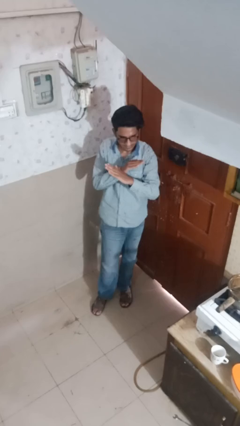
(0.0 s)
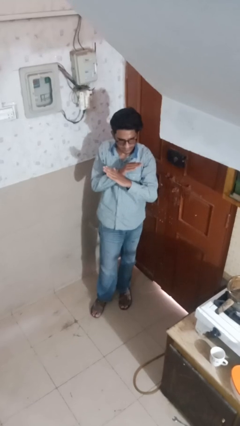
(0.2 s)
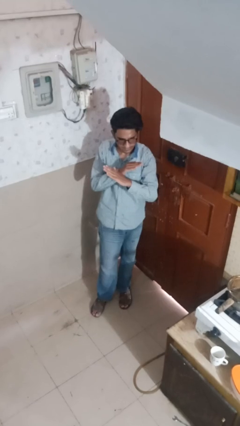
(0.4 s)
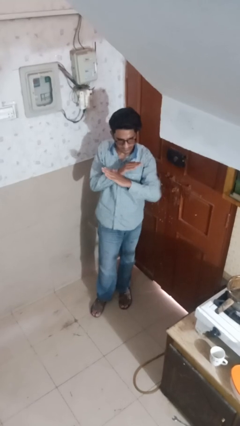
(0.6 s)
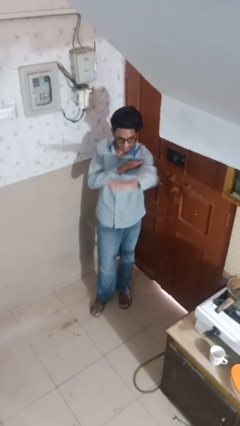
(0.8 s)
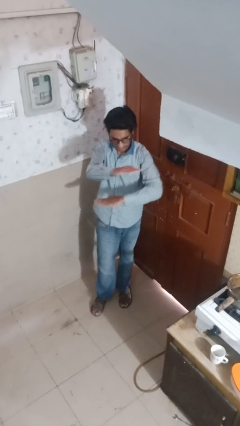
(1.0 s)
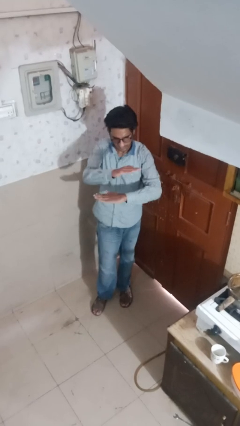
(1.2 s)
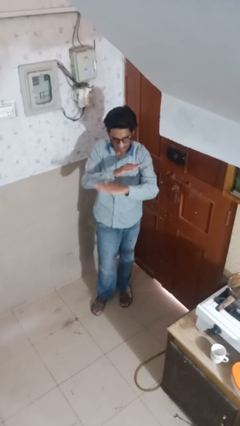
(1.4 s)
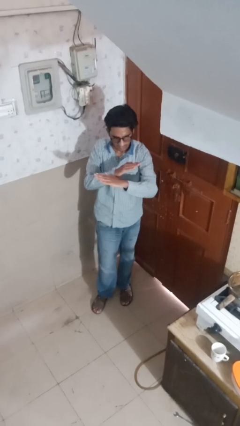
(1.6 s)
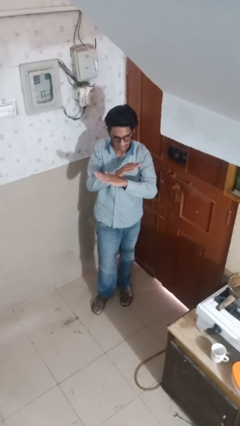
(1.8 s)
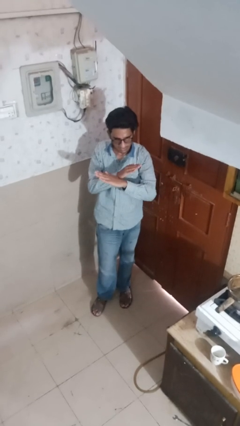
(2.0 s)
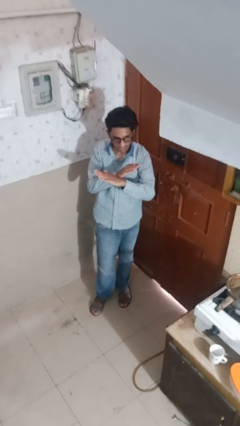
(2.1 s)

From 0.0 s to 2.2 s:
person karate chop

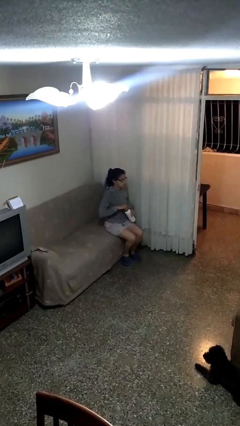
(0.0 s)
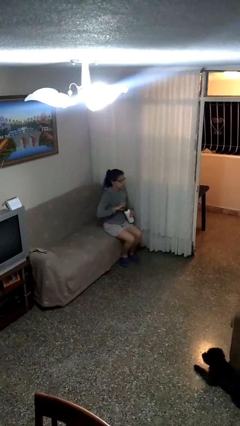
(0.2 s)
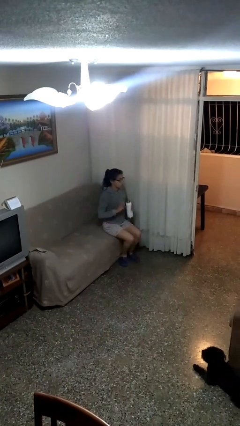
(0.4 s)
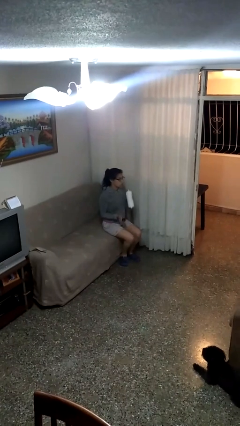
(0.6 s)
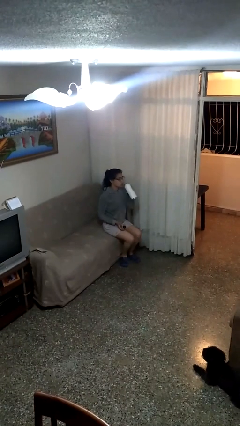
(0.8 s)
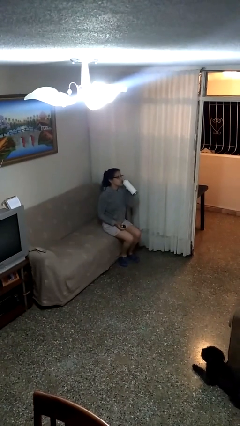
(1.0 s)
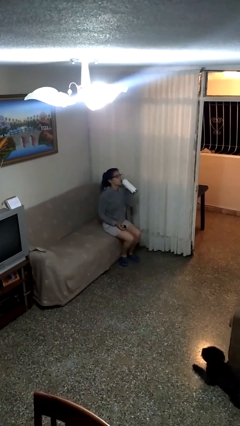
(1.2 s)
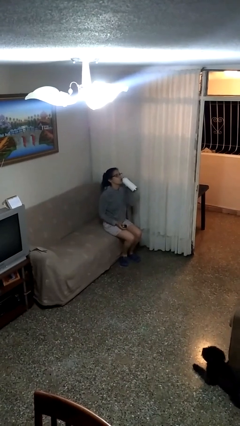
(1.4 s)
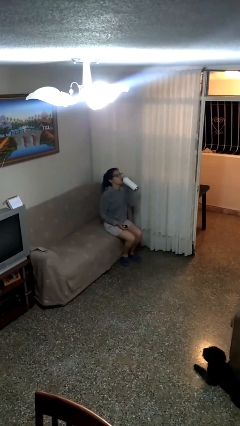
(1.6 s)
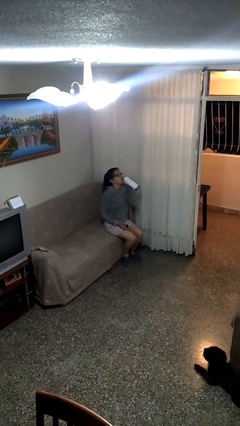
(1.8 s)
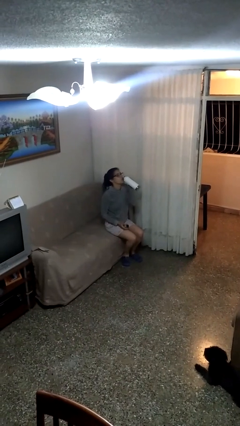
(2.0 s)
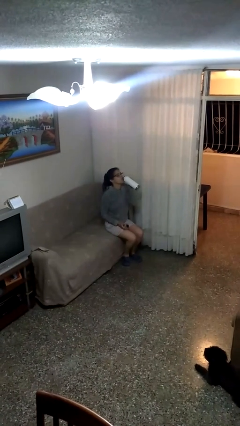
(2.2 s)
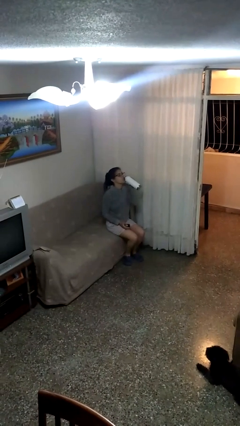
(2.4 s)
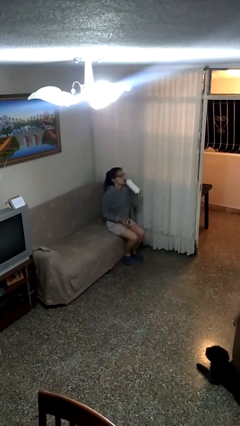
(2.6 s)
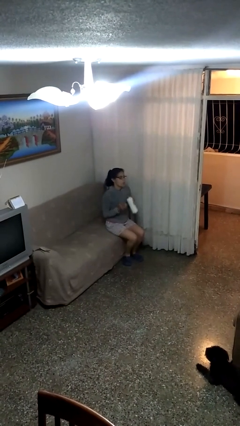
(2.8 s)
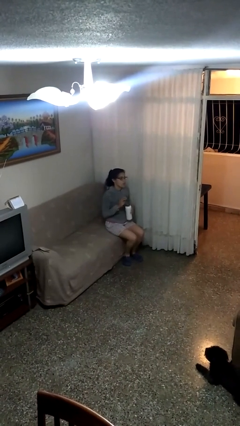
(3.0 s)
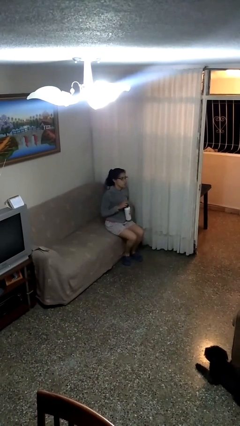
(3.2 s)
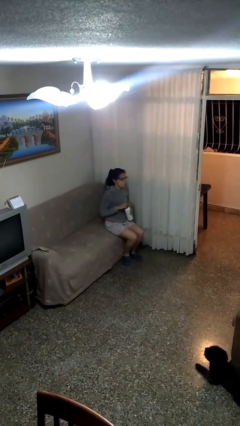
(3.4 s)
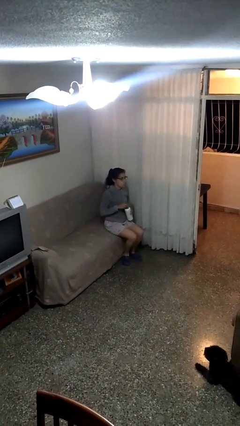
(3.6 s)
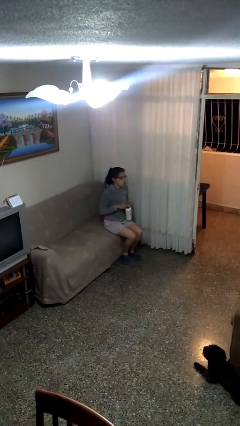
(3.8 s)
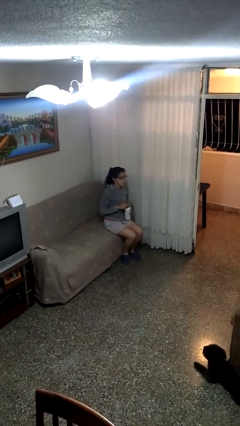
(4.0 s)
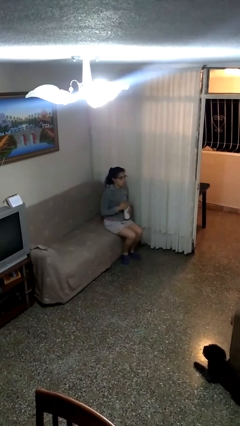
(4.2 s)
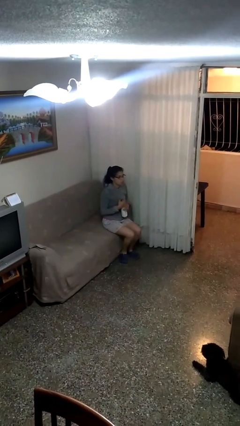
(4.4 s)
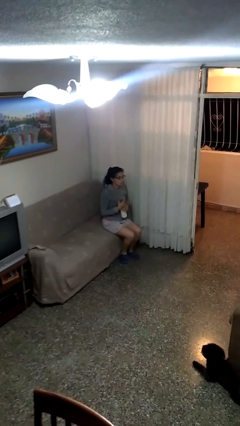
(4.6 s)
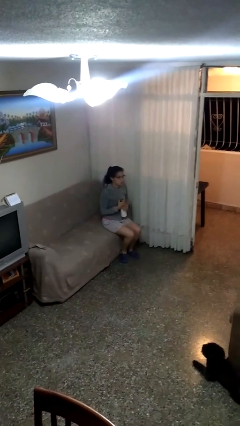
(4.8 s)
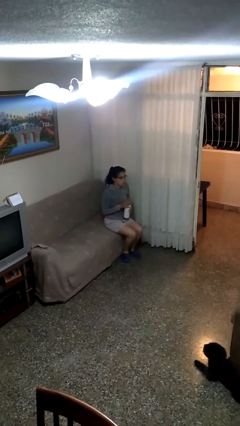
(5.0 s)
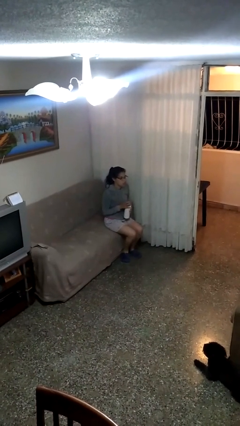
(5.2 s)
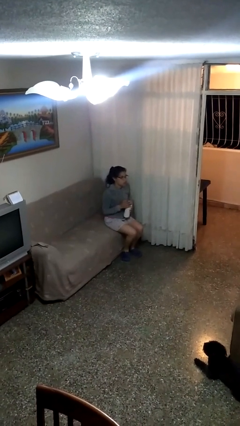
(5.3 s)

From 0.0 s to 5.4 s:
person drinks from bottle

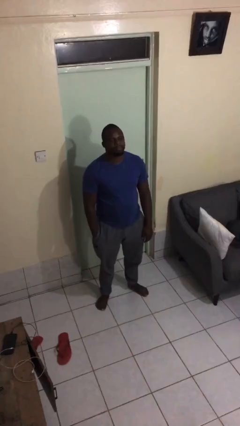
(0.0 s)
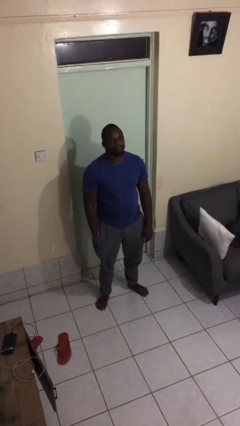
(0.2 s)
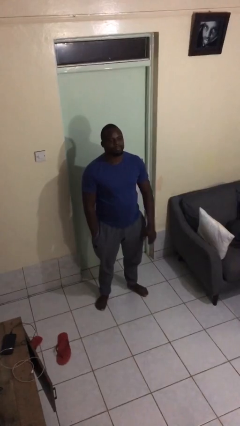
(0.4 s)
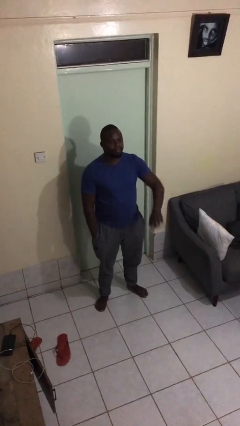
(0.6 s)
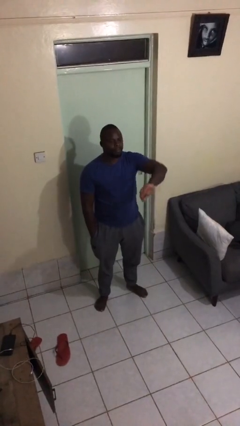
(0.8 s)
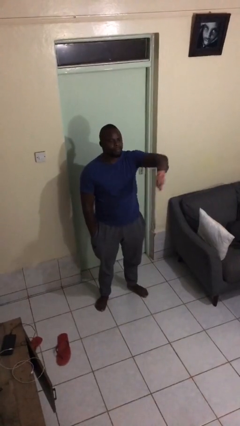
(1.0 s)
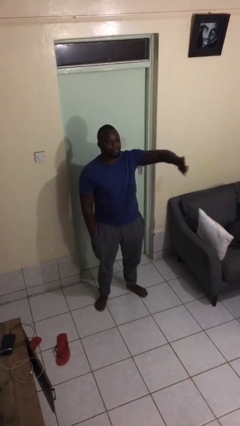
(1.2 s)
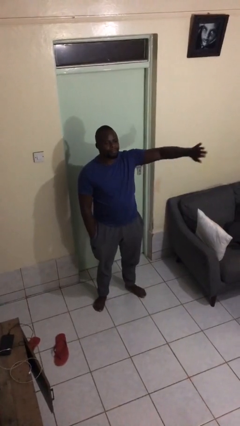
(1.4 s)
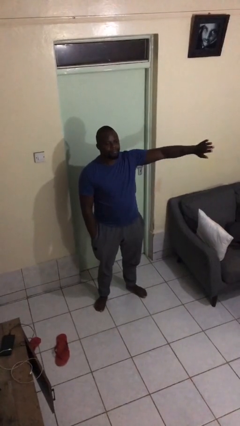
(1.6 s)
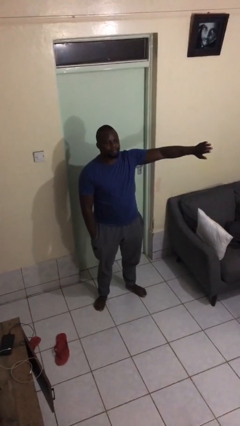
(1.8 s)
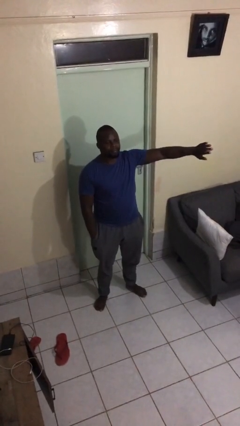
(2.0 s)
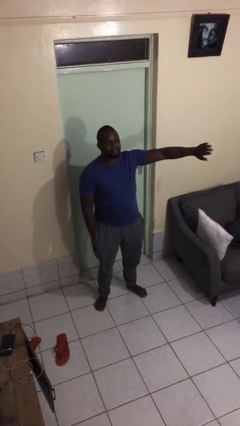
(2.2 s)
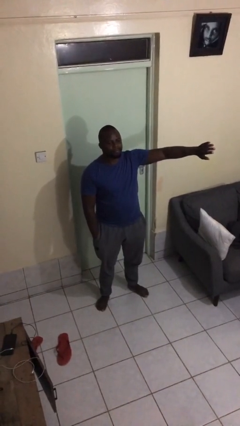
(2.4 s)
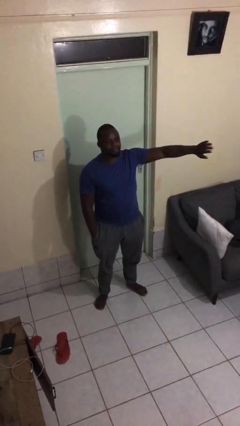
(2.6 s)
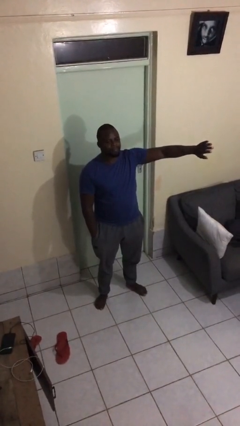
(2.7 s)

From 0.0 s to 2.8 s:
person gestures swipe left

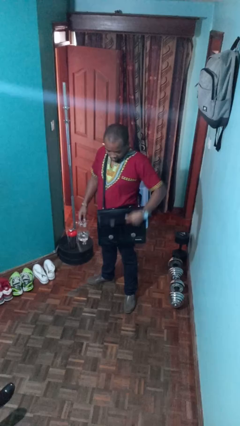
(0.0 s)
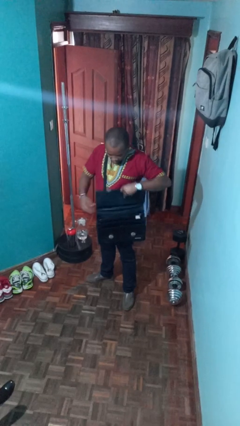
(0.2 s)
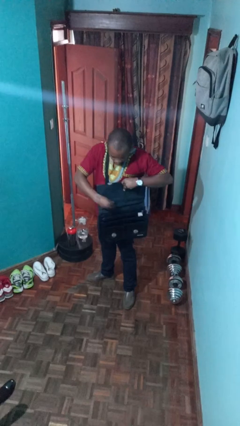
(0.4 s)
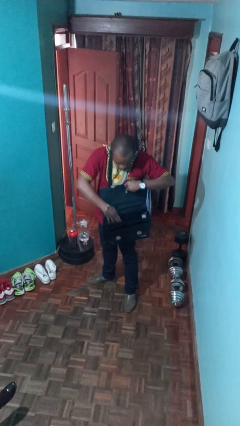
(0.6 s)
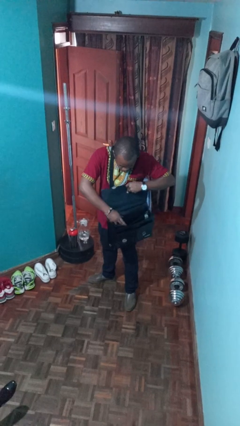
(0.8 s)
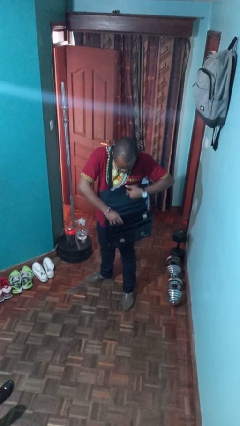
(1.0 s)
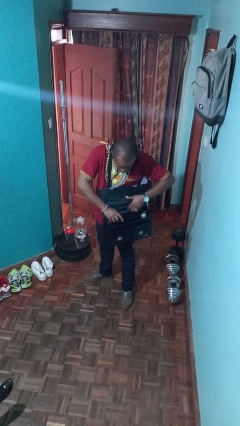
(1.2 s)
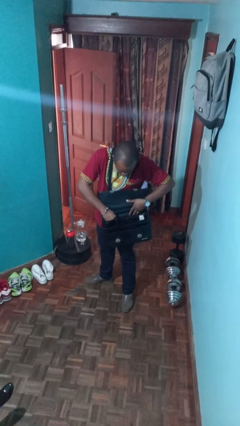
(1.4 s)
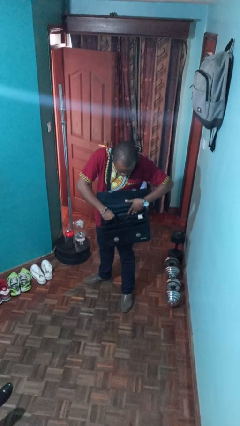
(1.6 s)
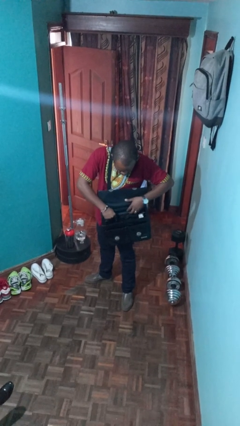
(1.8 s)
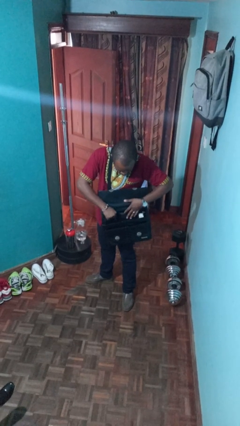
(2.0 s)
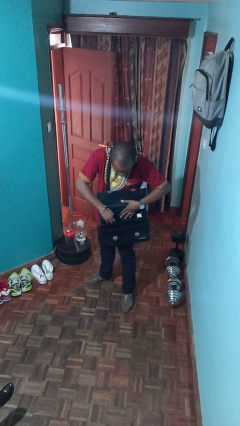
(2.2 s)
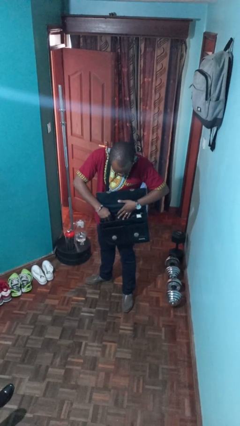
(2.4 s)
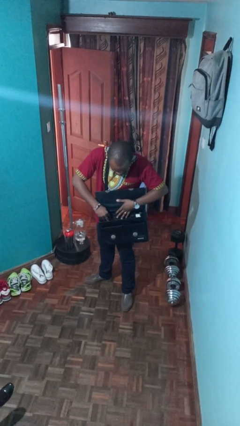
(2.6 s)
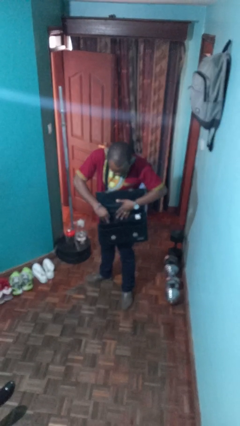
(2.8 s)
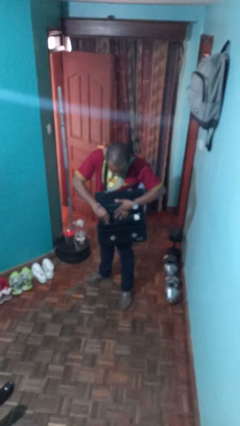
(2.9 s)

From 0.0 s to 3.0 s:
person searches in purse

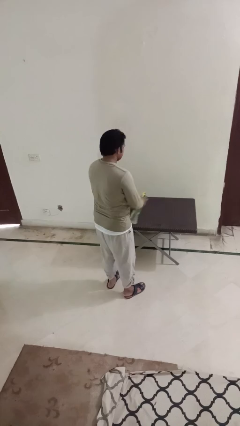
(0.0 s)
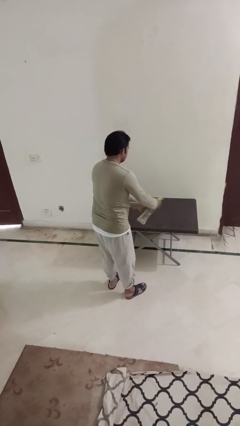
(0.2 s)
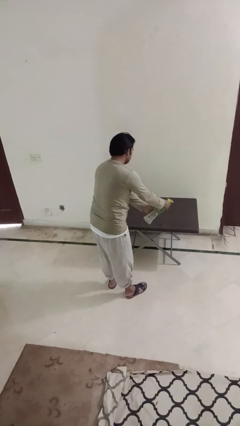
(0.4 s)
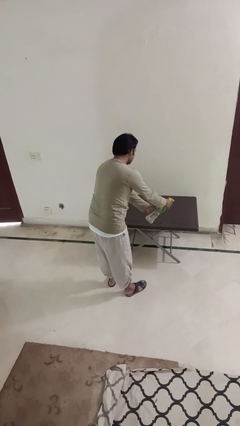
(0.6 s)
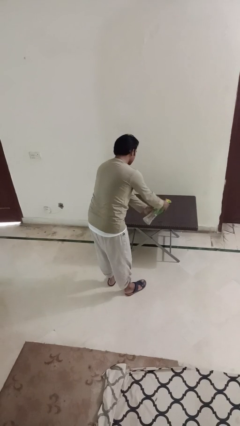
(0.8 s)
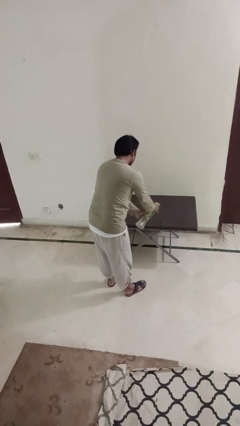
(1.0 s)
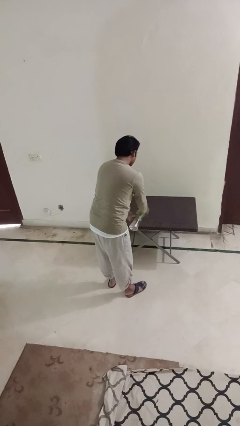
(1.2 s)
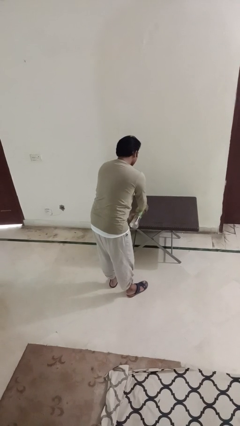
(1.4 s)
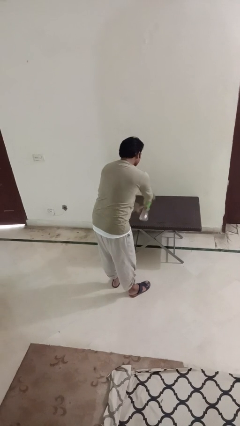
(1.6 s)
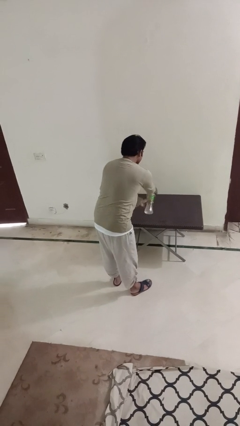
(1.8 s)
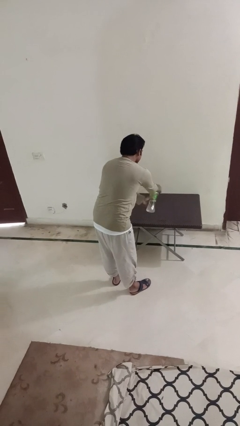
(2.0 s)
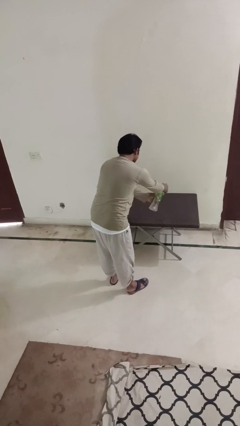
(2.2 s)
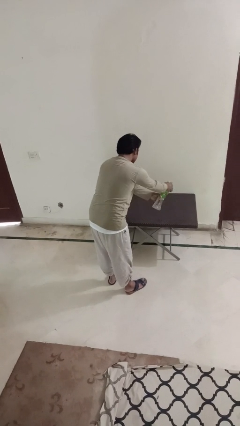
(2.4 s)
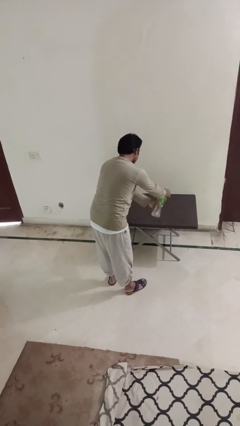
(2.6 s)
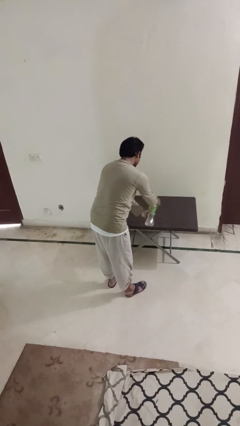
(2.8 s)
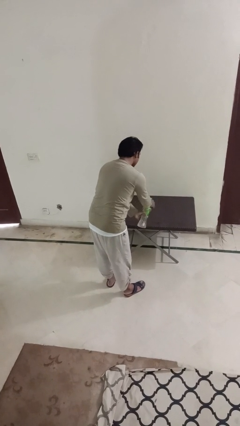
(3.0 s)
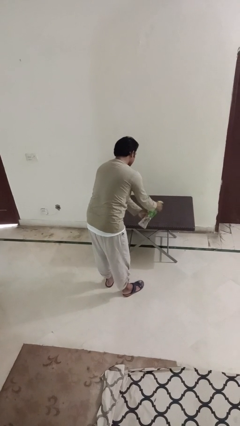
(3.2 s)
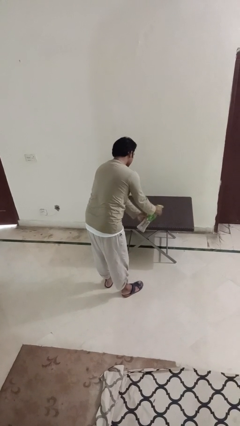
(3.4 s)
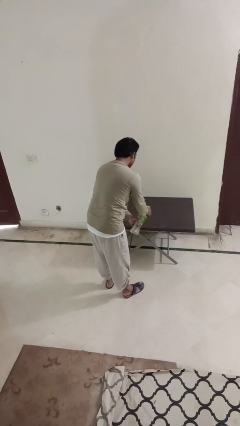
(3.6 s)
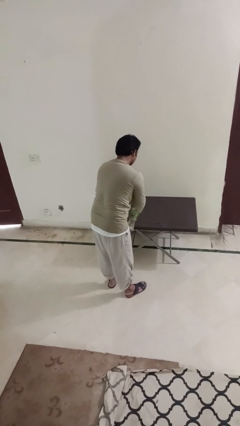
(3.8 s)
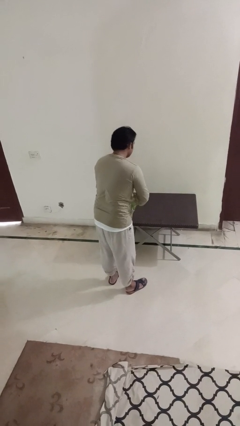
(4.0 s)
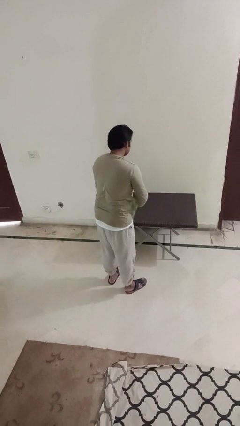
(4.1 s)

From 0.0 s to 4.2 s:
person sprays from bottle
